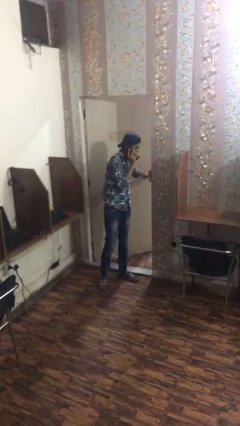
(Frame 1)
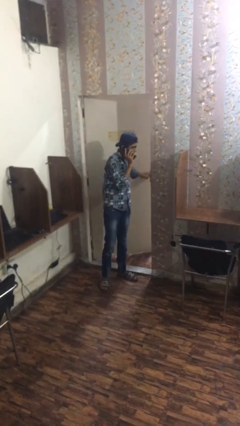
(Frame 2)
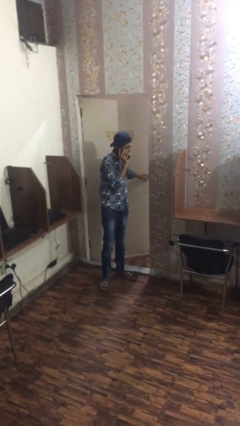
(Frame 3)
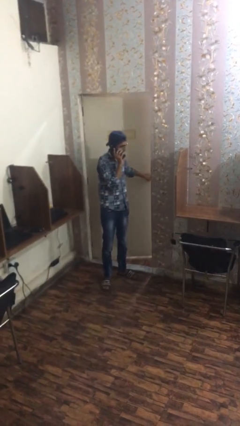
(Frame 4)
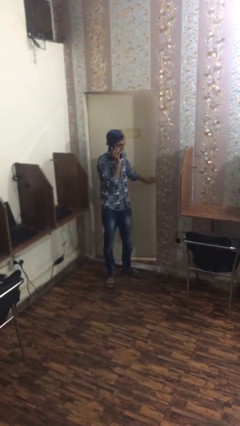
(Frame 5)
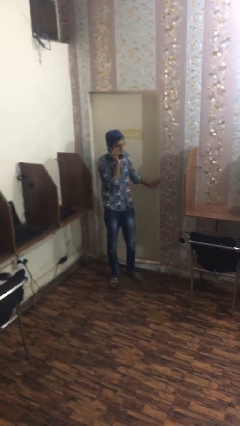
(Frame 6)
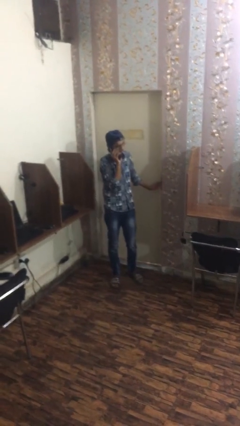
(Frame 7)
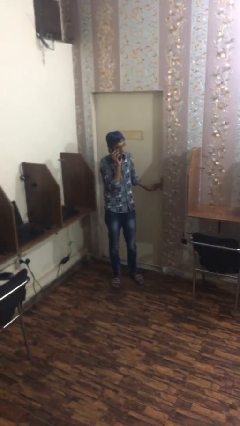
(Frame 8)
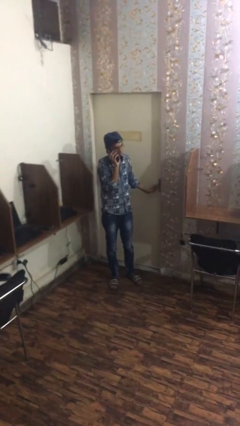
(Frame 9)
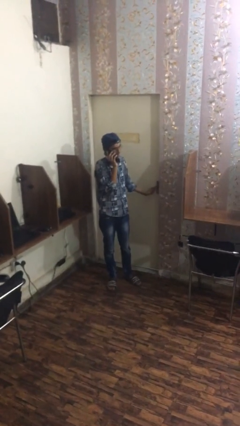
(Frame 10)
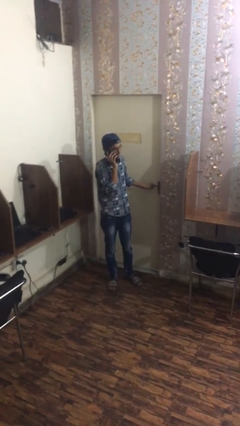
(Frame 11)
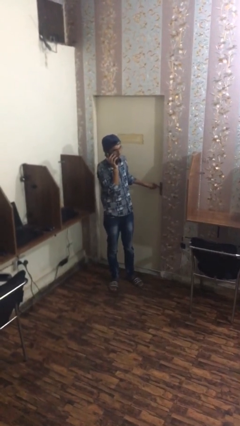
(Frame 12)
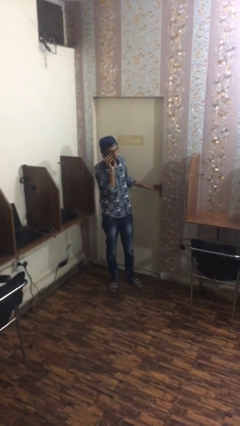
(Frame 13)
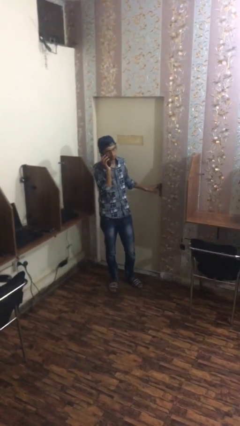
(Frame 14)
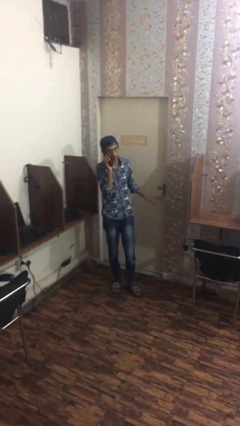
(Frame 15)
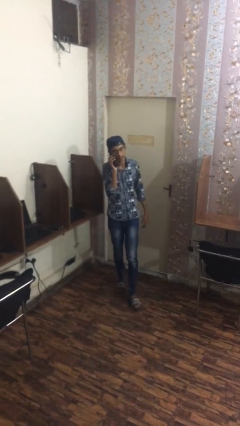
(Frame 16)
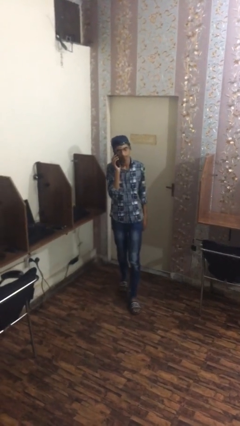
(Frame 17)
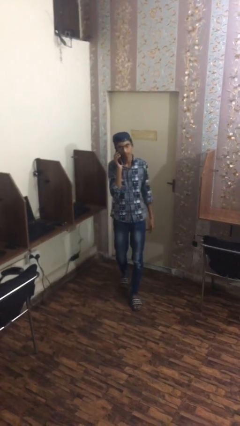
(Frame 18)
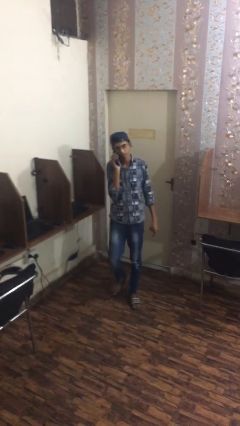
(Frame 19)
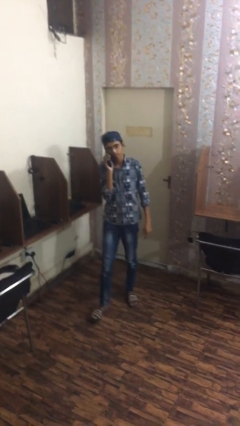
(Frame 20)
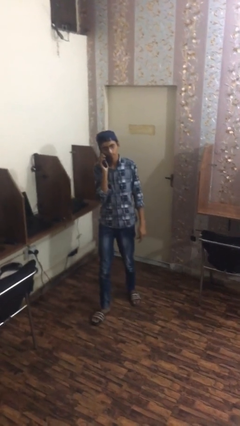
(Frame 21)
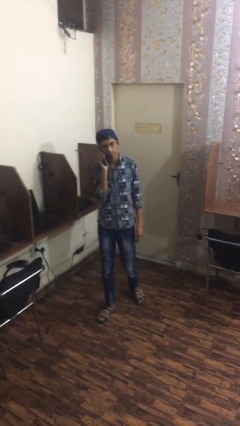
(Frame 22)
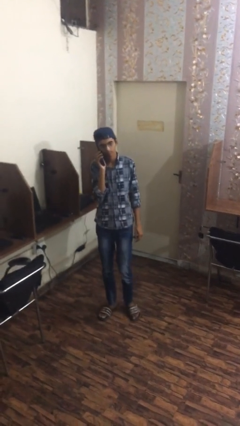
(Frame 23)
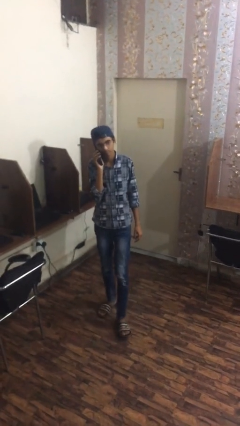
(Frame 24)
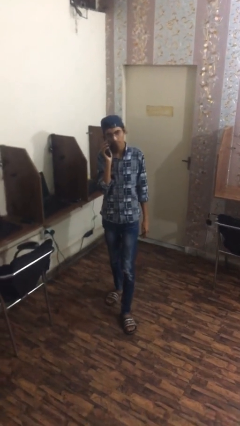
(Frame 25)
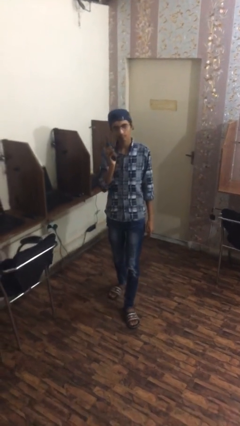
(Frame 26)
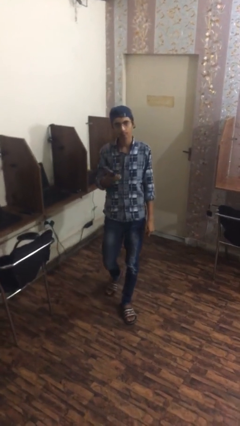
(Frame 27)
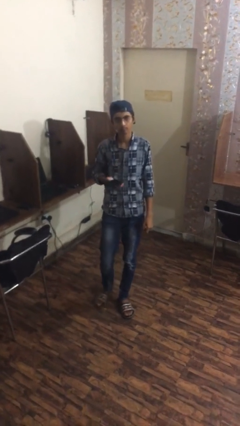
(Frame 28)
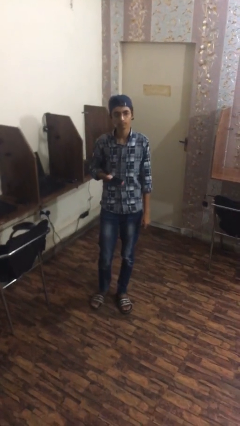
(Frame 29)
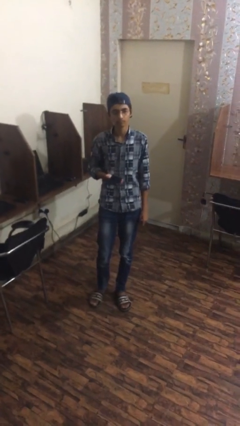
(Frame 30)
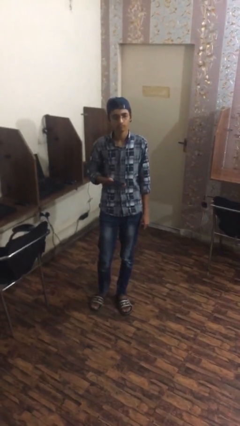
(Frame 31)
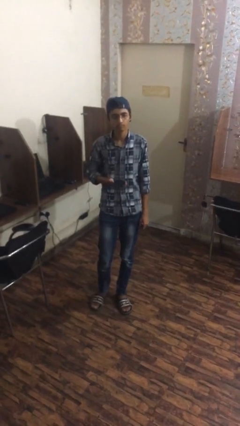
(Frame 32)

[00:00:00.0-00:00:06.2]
person closes facility door

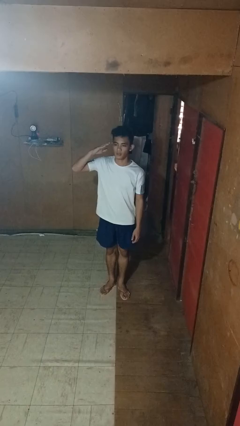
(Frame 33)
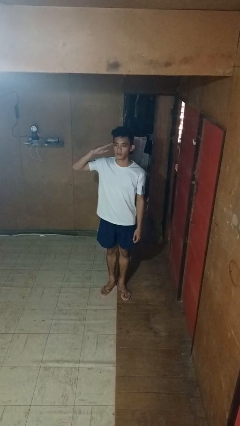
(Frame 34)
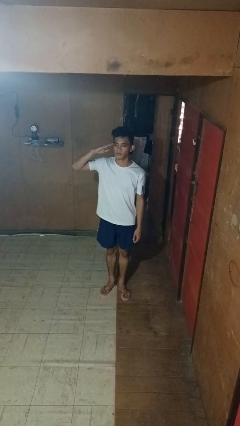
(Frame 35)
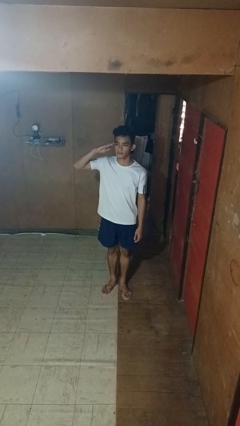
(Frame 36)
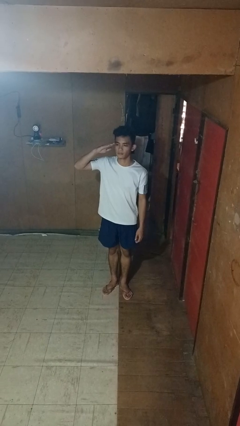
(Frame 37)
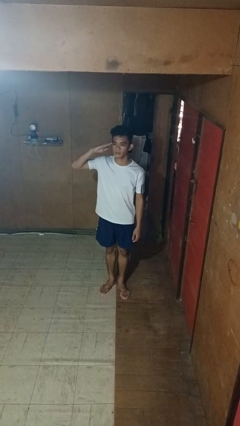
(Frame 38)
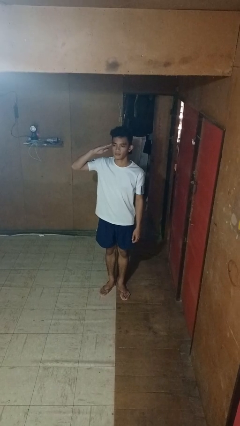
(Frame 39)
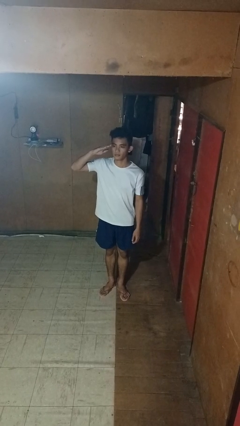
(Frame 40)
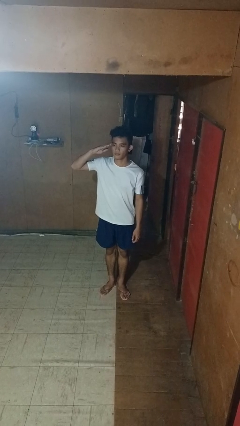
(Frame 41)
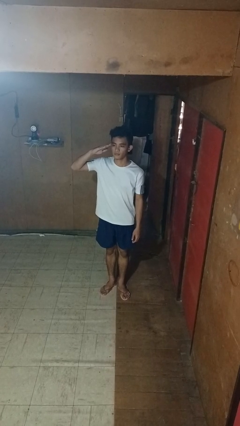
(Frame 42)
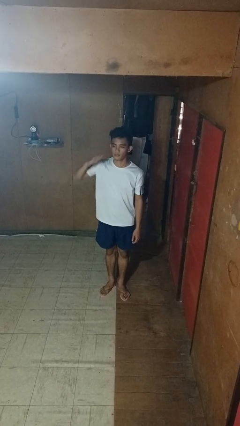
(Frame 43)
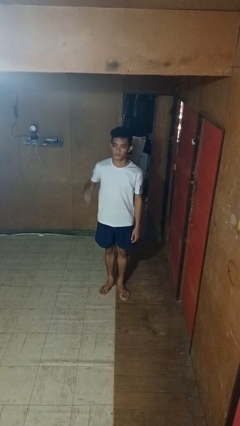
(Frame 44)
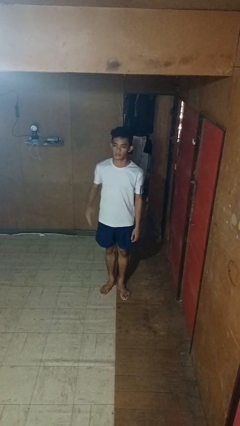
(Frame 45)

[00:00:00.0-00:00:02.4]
person salutes

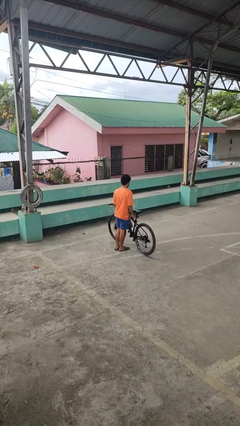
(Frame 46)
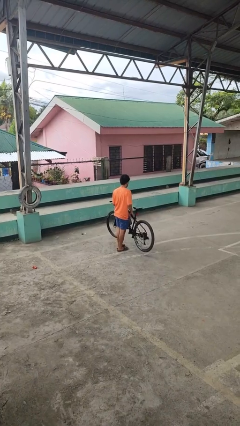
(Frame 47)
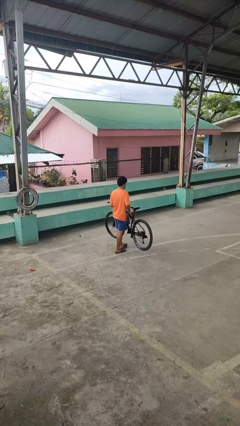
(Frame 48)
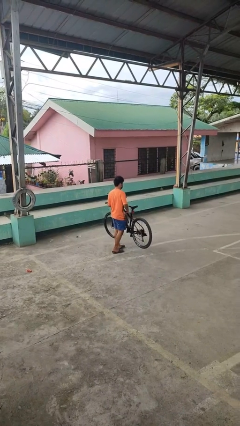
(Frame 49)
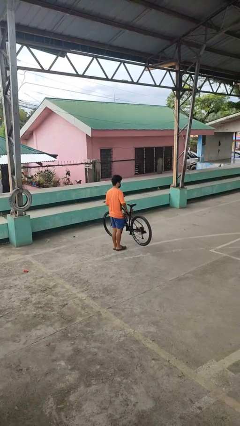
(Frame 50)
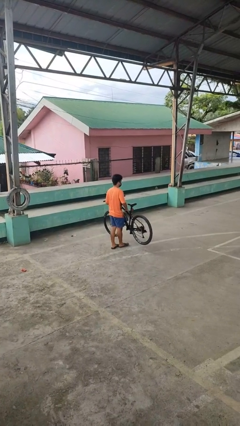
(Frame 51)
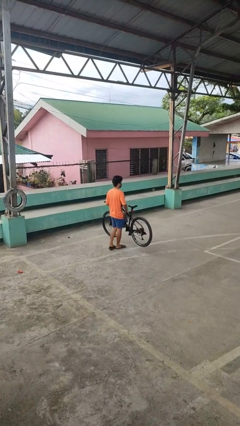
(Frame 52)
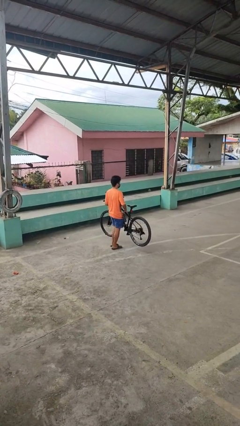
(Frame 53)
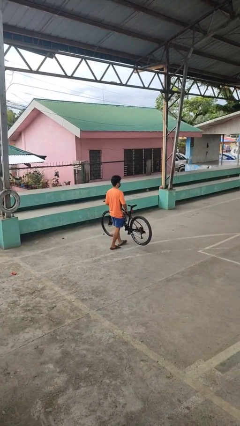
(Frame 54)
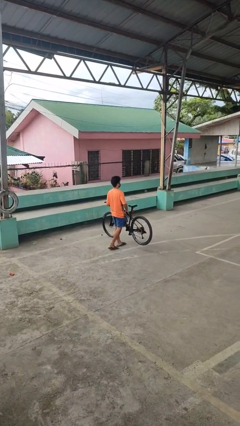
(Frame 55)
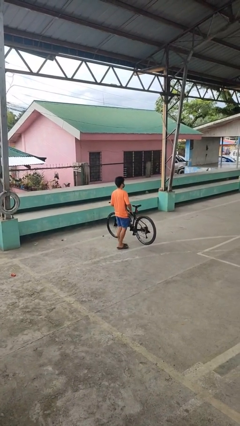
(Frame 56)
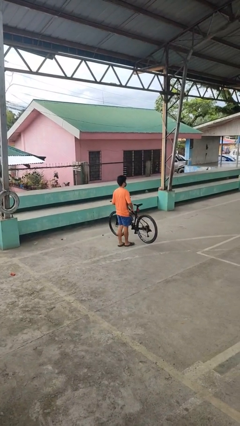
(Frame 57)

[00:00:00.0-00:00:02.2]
person carries bicycle

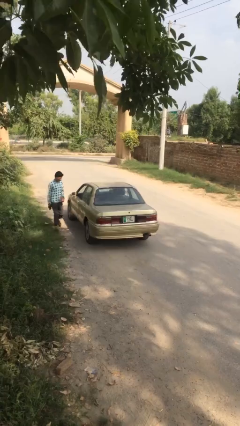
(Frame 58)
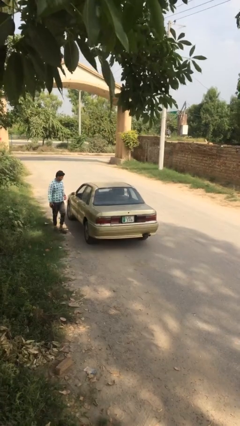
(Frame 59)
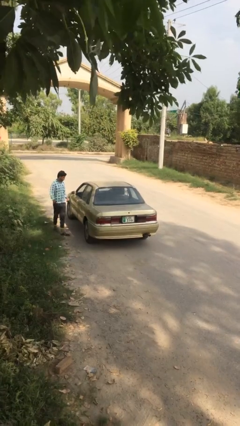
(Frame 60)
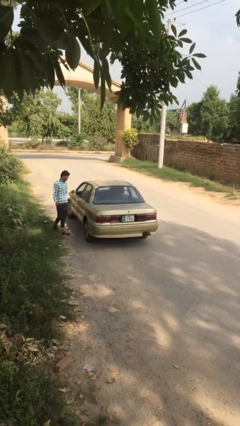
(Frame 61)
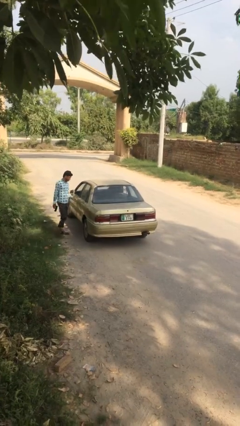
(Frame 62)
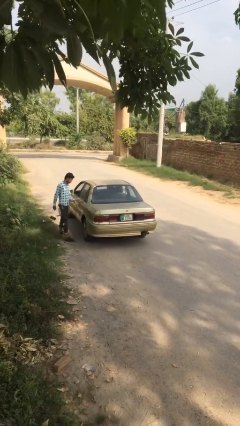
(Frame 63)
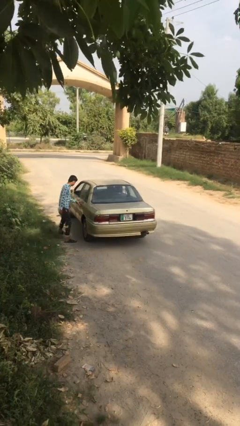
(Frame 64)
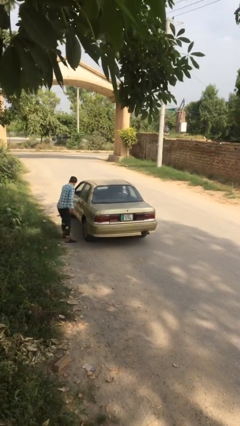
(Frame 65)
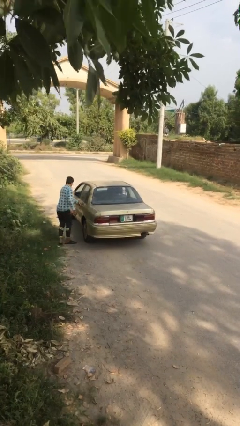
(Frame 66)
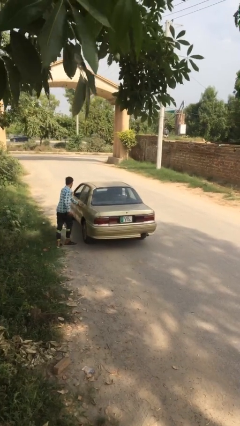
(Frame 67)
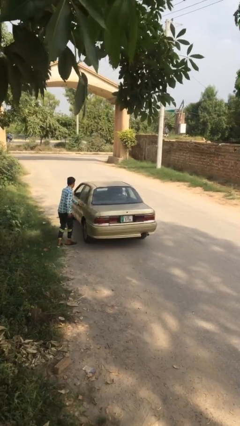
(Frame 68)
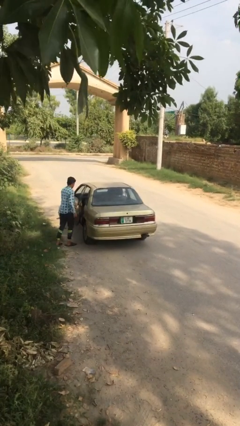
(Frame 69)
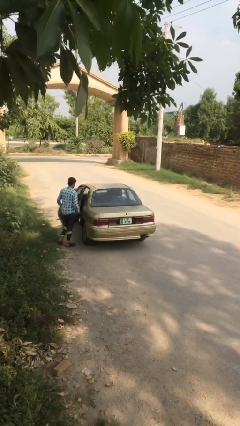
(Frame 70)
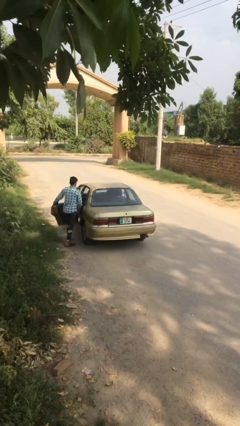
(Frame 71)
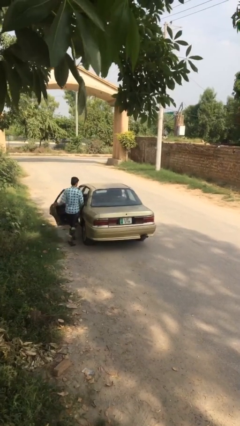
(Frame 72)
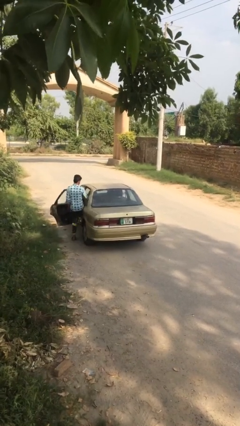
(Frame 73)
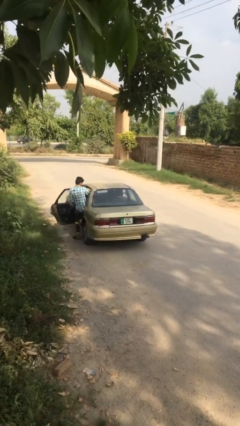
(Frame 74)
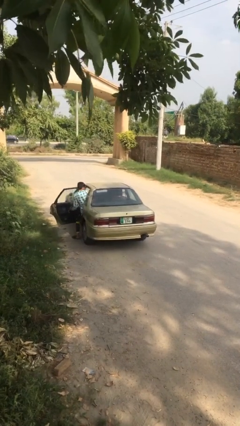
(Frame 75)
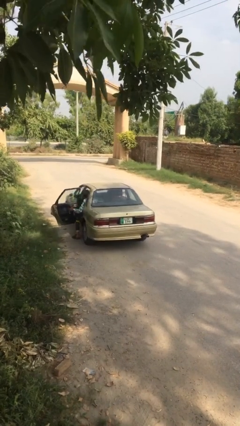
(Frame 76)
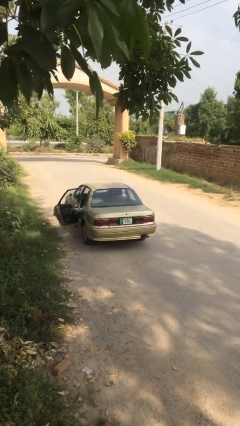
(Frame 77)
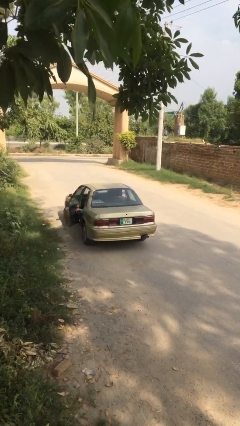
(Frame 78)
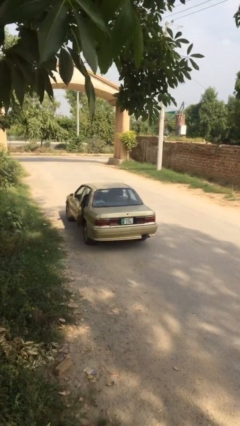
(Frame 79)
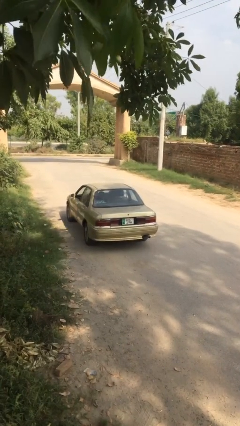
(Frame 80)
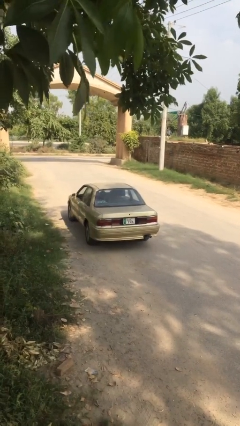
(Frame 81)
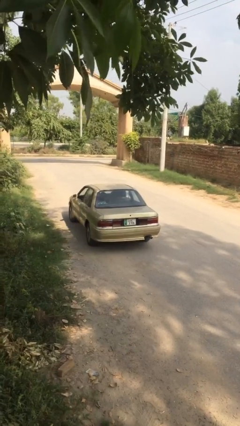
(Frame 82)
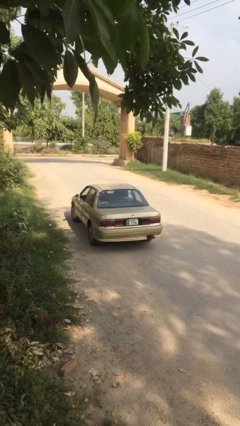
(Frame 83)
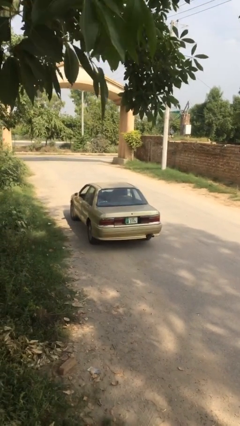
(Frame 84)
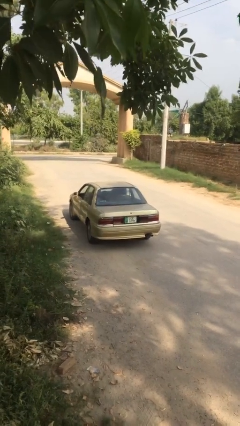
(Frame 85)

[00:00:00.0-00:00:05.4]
car picks up person

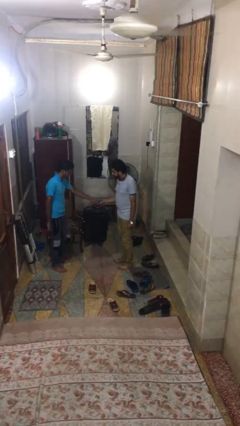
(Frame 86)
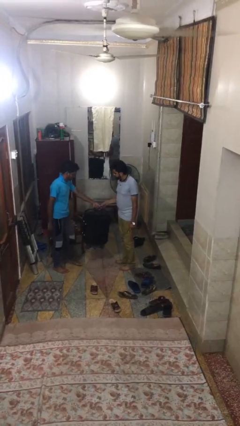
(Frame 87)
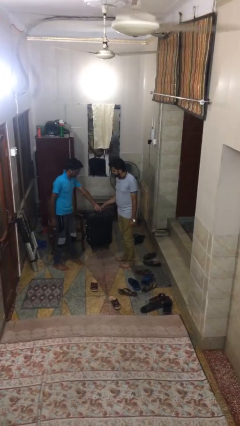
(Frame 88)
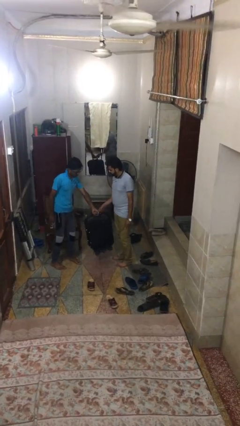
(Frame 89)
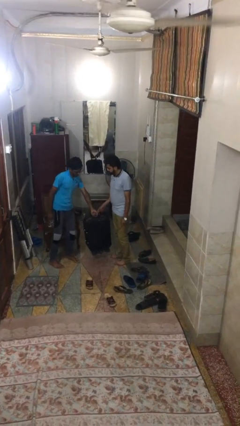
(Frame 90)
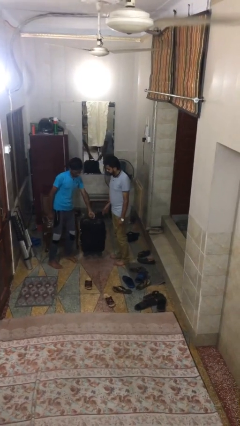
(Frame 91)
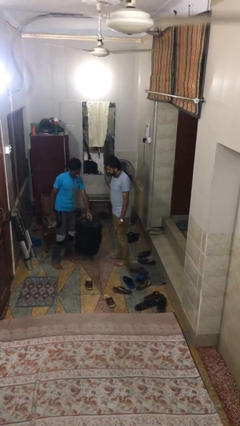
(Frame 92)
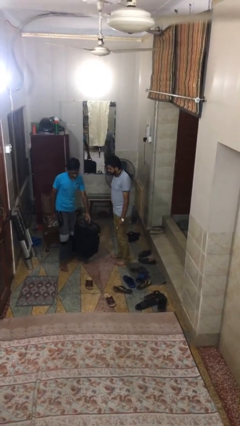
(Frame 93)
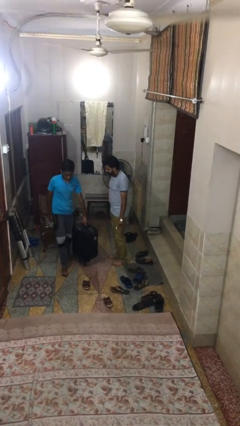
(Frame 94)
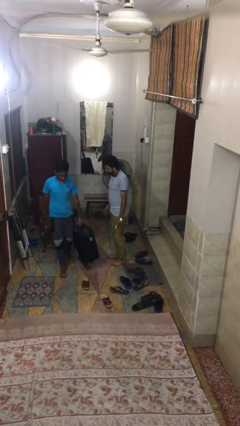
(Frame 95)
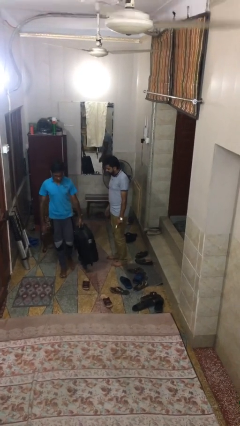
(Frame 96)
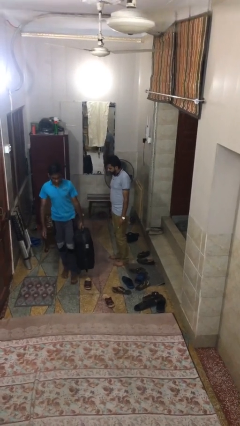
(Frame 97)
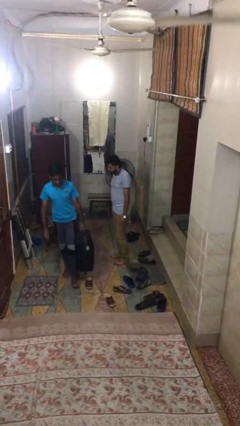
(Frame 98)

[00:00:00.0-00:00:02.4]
person transfers object to person
